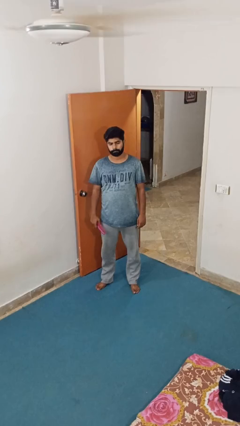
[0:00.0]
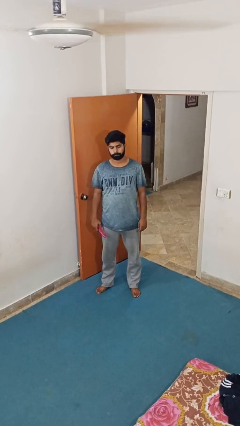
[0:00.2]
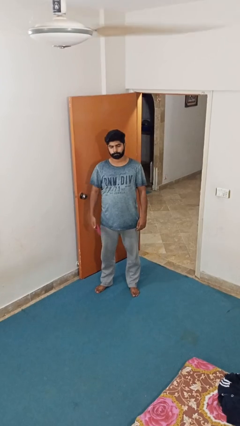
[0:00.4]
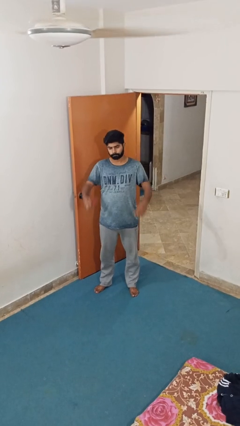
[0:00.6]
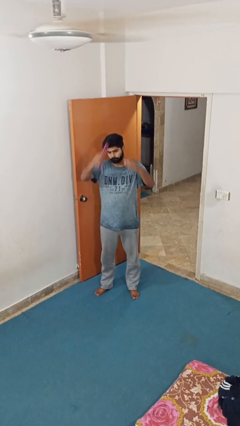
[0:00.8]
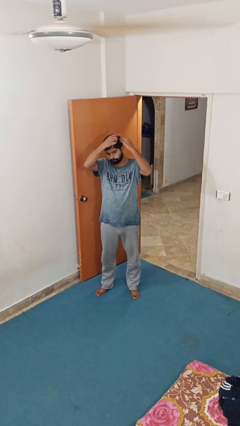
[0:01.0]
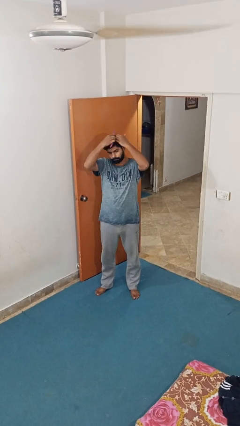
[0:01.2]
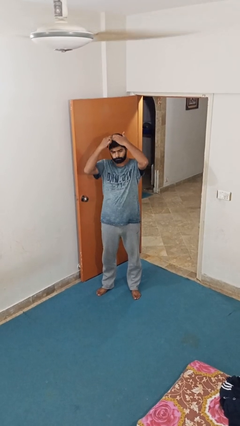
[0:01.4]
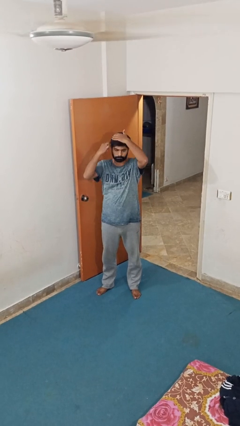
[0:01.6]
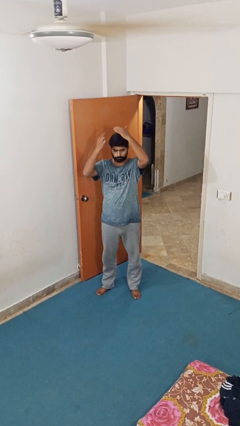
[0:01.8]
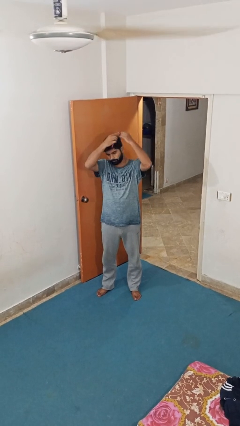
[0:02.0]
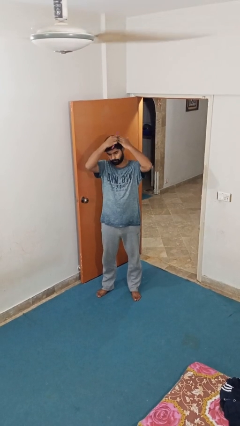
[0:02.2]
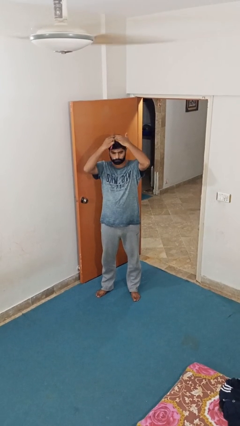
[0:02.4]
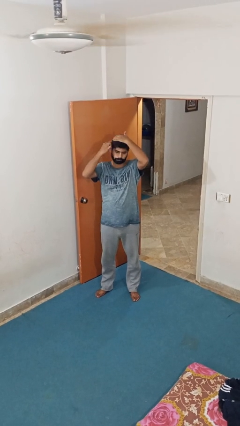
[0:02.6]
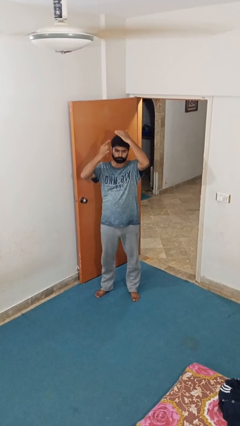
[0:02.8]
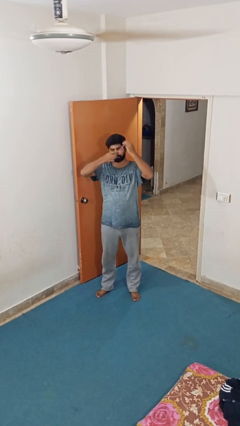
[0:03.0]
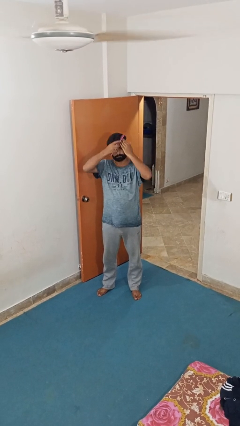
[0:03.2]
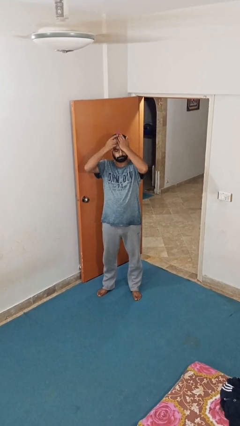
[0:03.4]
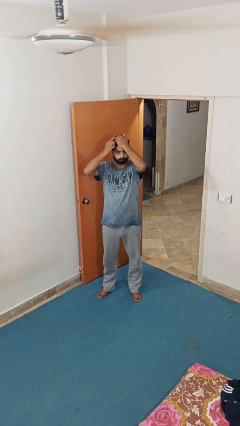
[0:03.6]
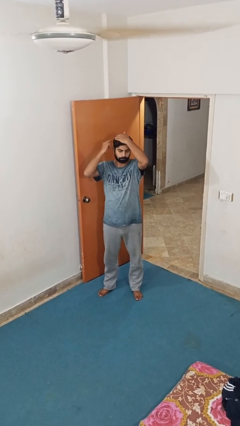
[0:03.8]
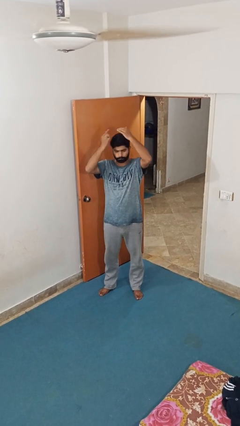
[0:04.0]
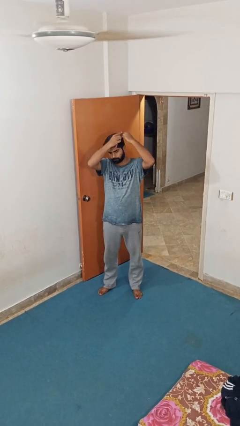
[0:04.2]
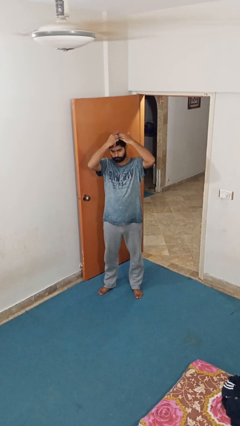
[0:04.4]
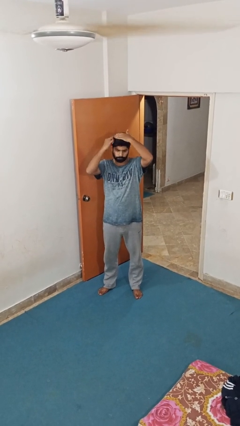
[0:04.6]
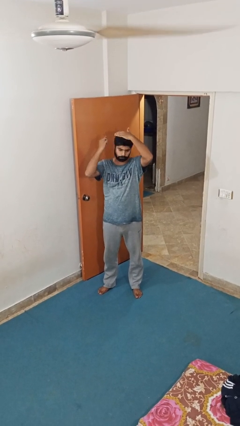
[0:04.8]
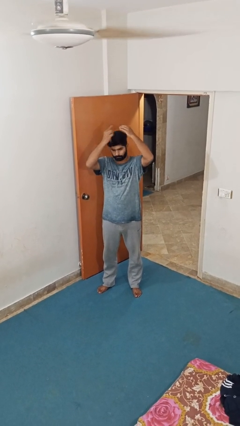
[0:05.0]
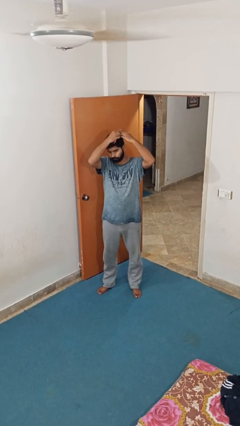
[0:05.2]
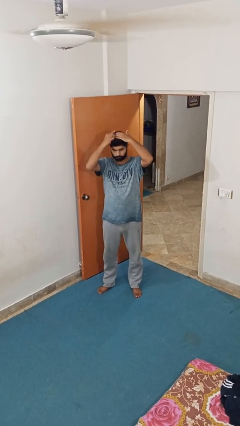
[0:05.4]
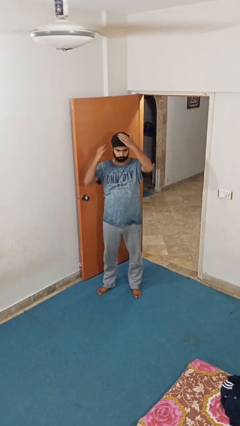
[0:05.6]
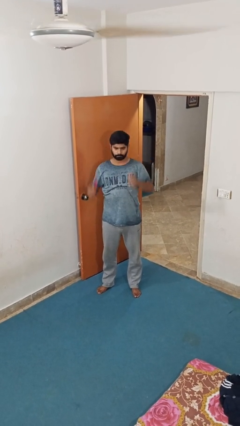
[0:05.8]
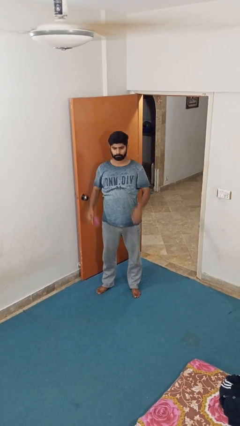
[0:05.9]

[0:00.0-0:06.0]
person brushes hair

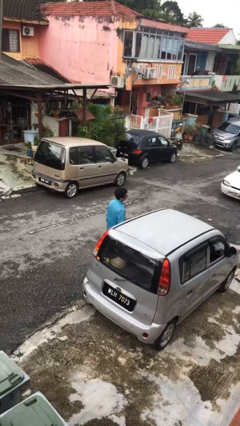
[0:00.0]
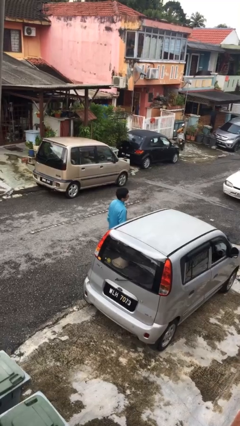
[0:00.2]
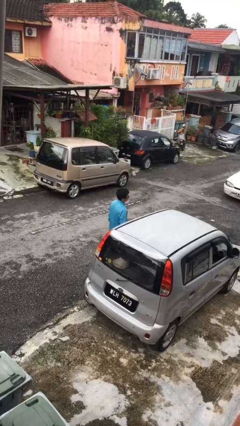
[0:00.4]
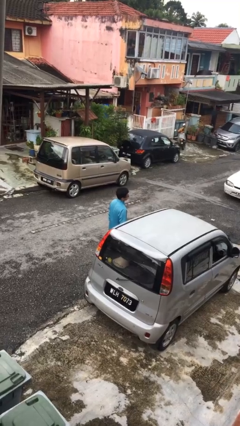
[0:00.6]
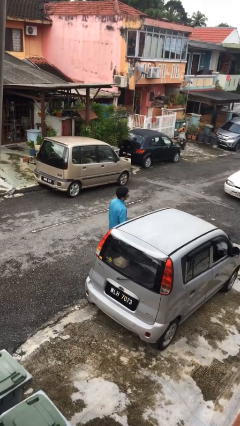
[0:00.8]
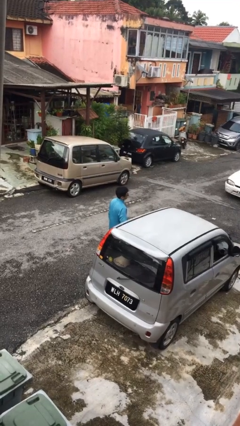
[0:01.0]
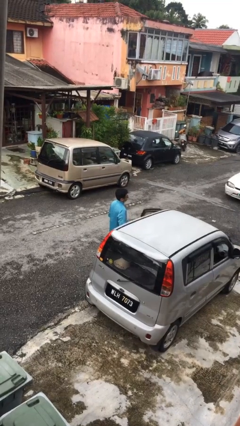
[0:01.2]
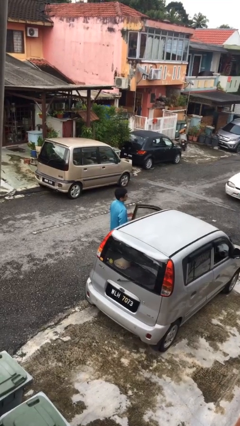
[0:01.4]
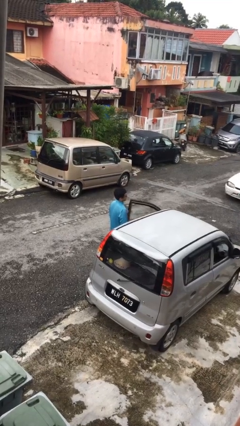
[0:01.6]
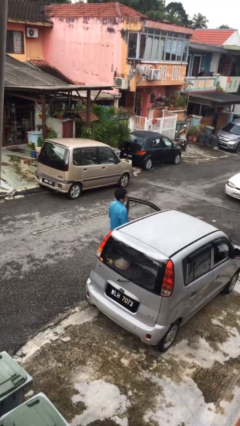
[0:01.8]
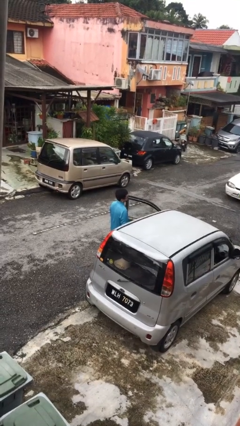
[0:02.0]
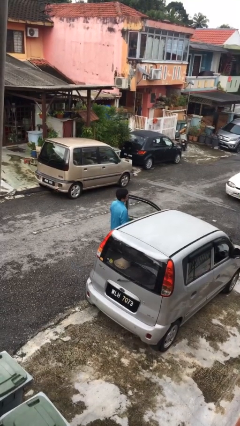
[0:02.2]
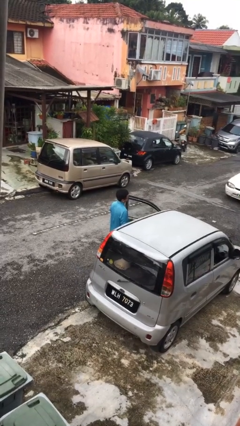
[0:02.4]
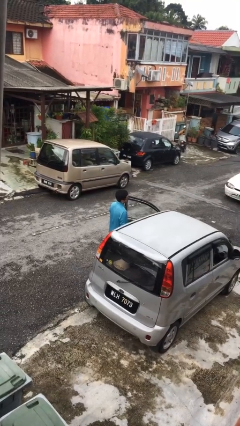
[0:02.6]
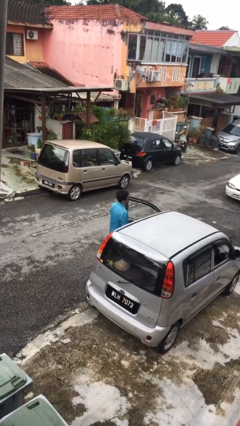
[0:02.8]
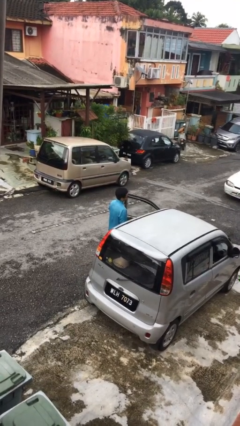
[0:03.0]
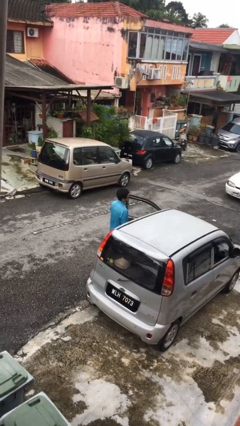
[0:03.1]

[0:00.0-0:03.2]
person opens car door

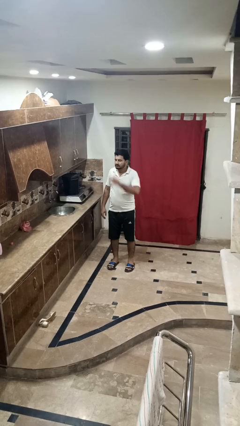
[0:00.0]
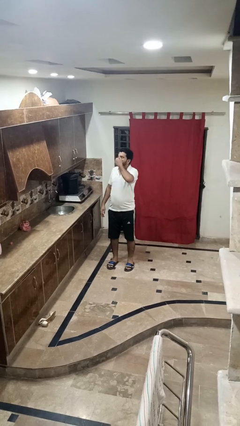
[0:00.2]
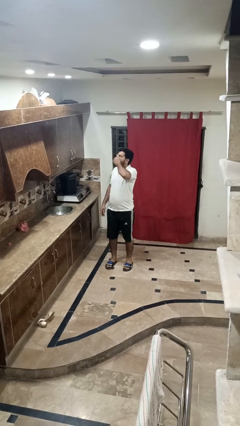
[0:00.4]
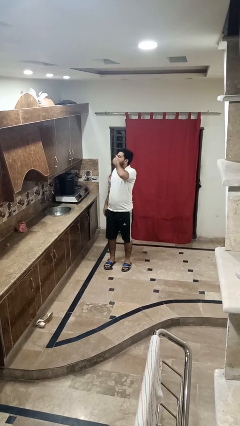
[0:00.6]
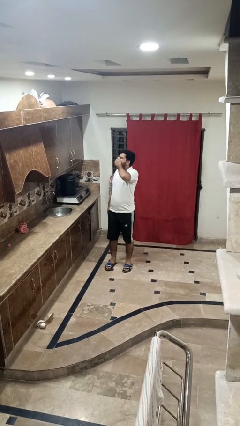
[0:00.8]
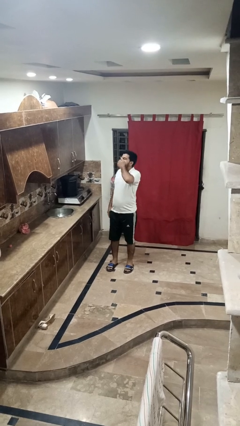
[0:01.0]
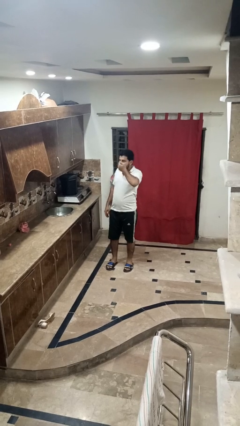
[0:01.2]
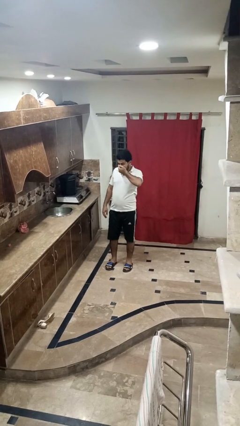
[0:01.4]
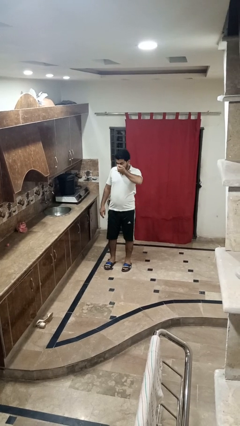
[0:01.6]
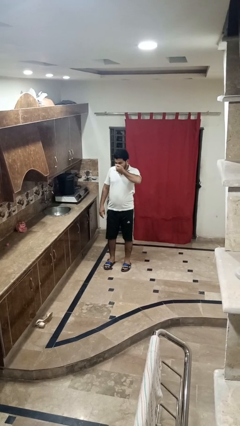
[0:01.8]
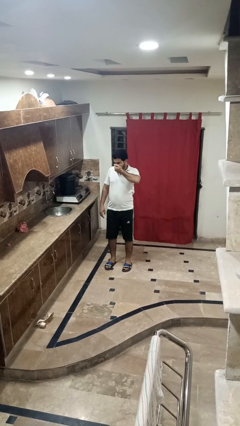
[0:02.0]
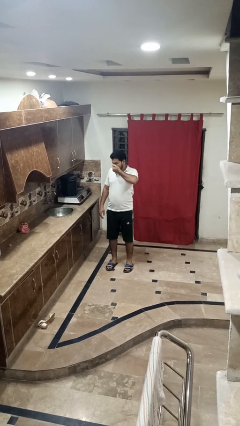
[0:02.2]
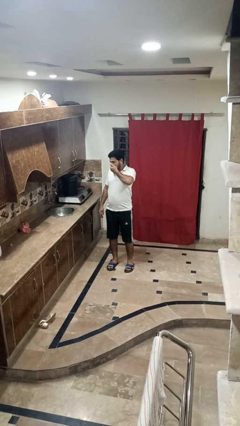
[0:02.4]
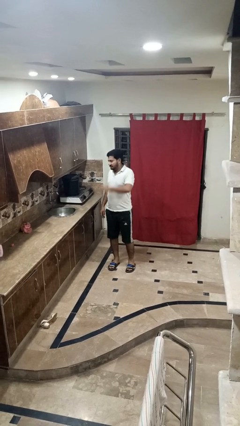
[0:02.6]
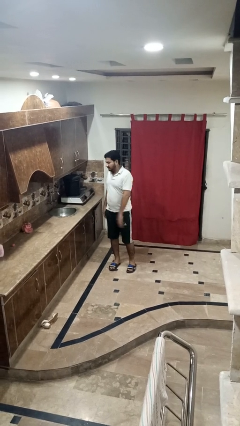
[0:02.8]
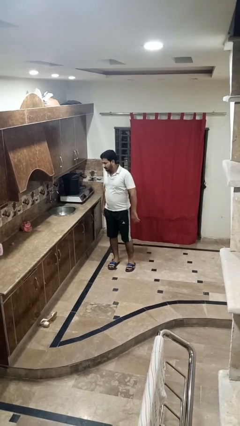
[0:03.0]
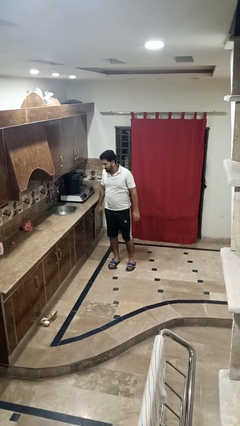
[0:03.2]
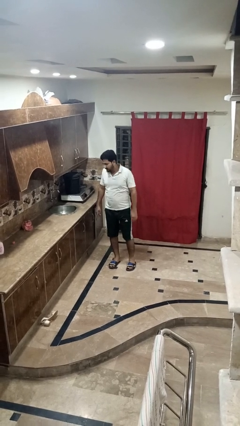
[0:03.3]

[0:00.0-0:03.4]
person sneezes into hand

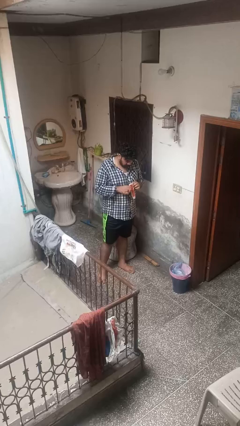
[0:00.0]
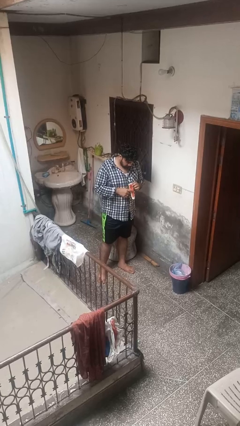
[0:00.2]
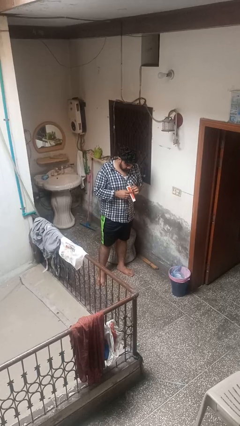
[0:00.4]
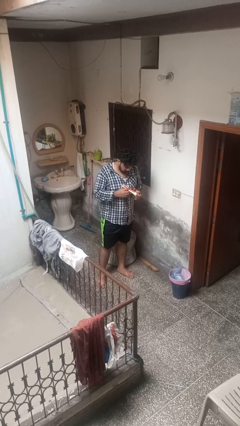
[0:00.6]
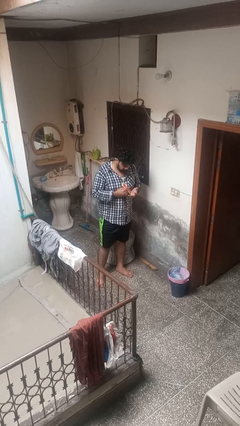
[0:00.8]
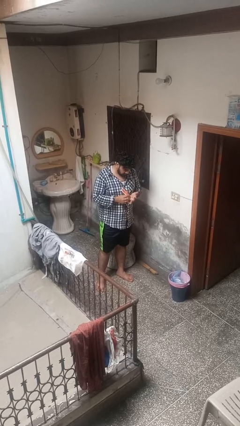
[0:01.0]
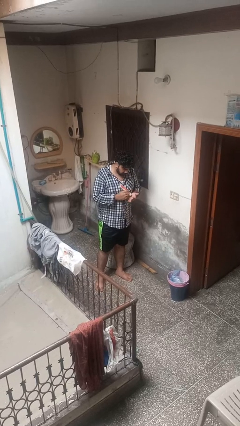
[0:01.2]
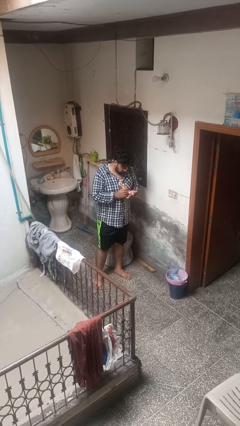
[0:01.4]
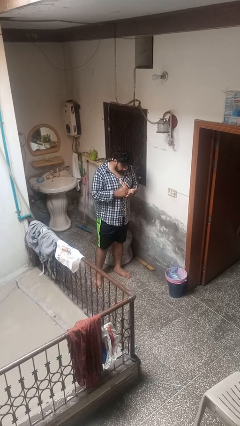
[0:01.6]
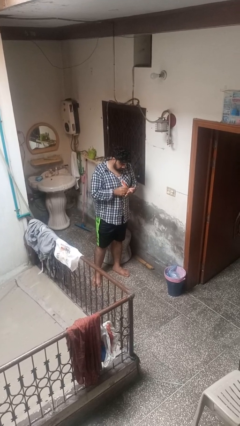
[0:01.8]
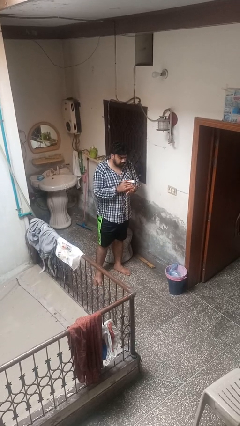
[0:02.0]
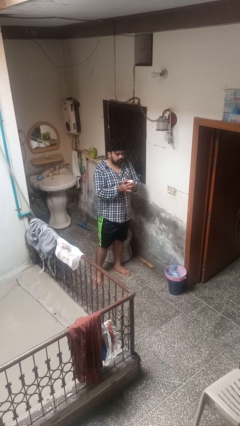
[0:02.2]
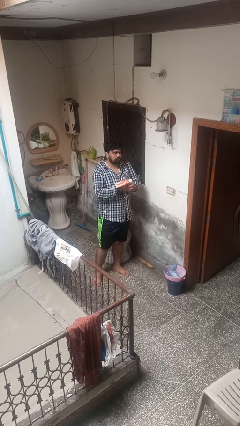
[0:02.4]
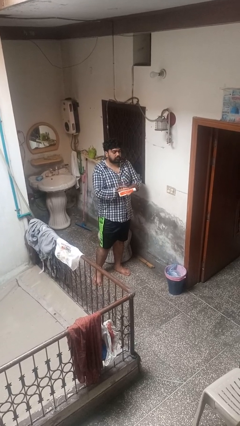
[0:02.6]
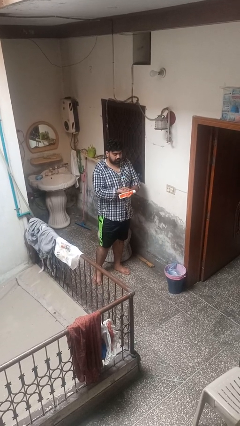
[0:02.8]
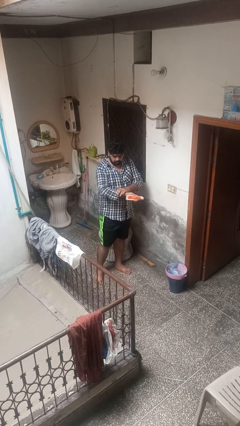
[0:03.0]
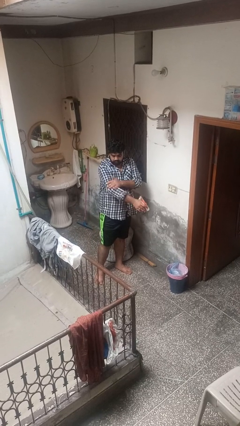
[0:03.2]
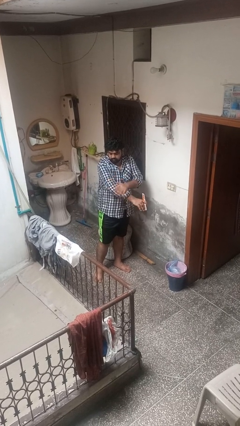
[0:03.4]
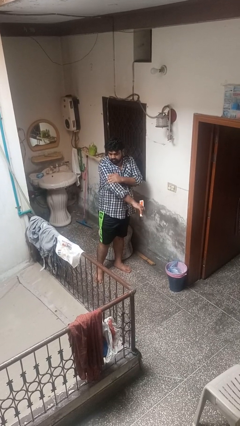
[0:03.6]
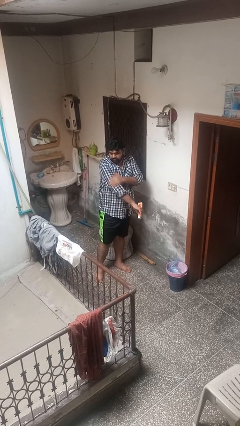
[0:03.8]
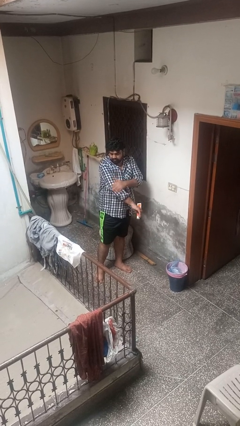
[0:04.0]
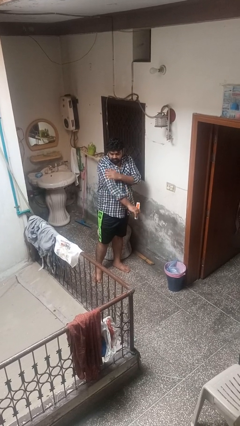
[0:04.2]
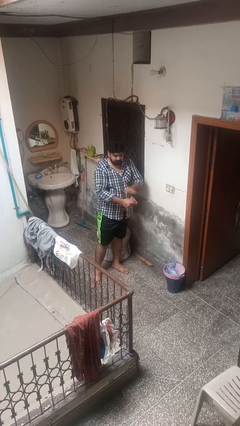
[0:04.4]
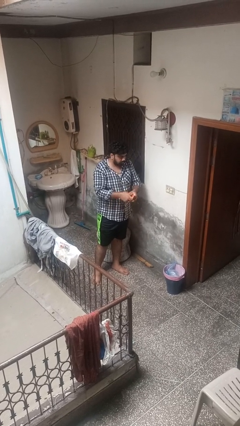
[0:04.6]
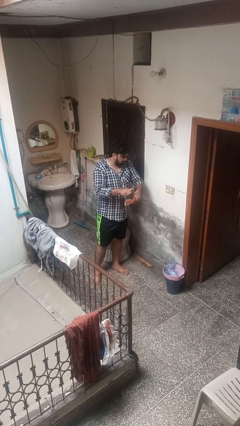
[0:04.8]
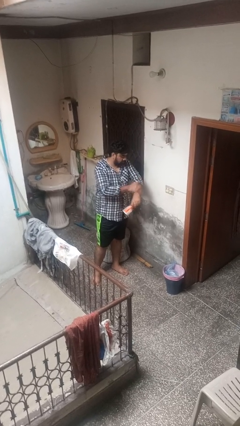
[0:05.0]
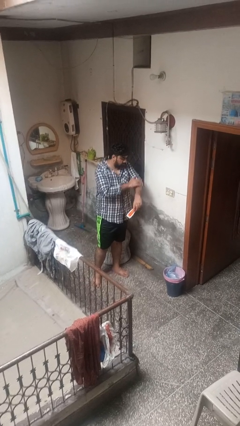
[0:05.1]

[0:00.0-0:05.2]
person applies sunscreen
